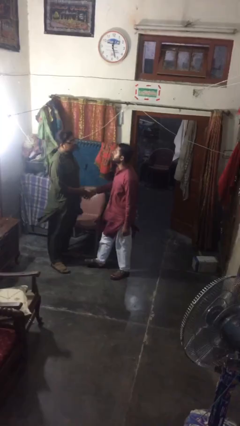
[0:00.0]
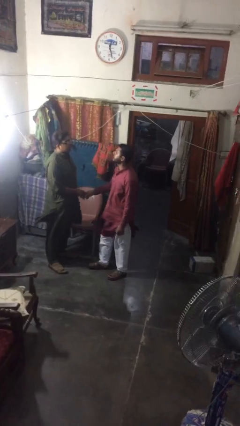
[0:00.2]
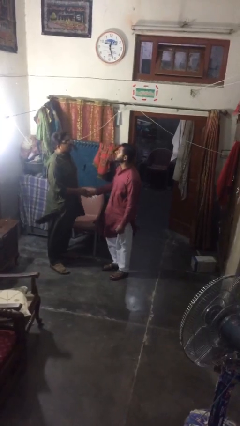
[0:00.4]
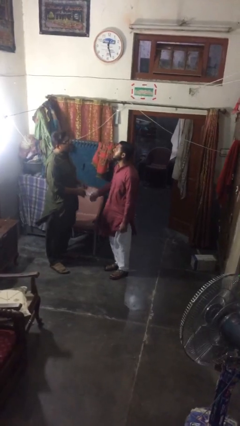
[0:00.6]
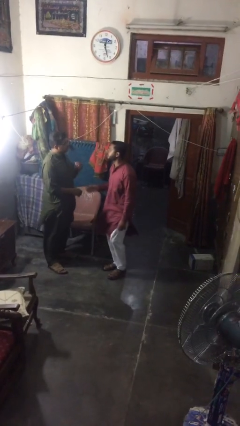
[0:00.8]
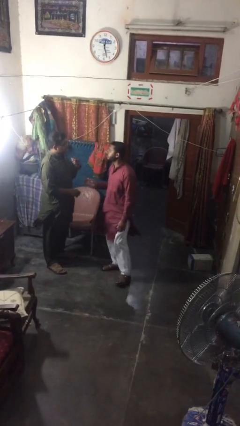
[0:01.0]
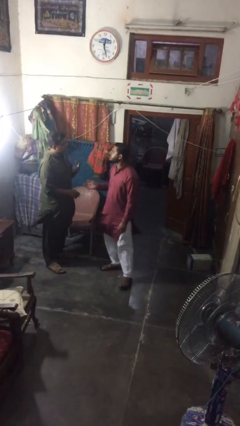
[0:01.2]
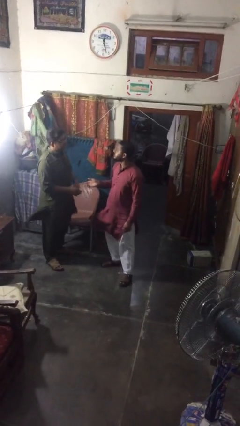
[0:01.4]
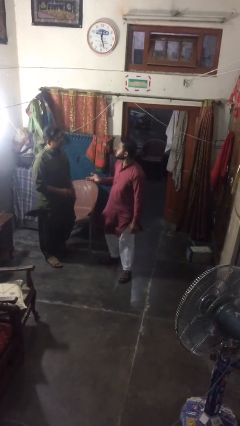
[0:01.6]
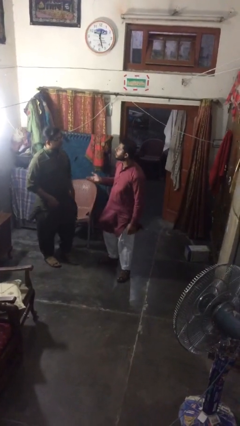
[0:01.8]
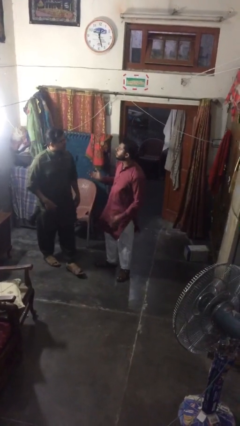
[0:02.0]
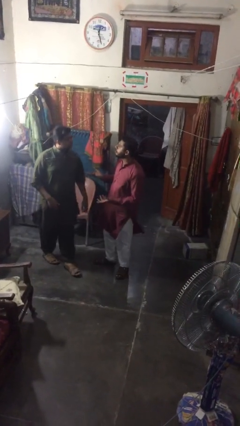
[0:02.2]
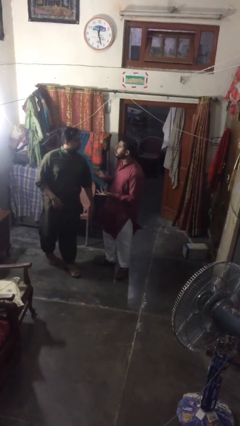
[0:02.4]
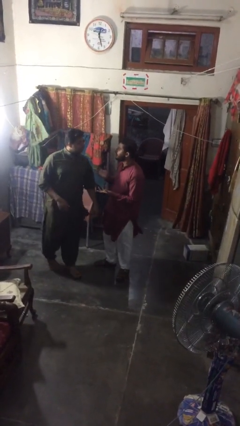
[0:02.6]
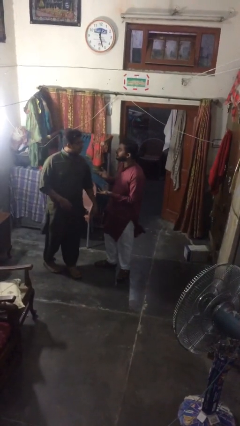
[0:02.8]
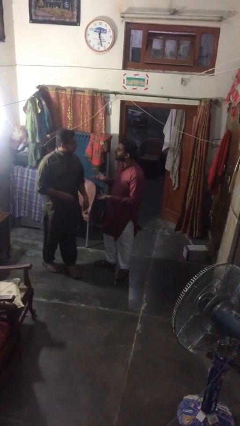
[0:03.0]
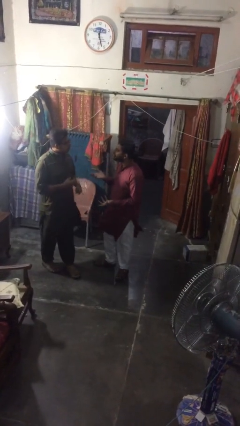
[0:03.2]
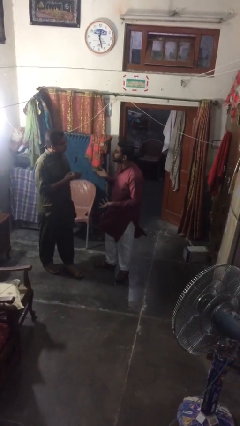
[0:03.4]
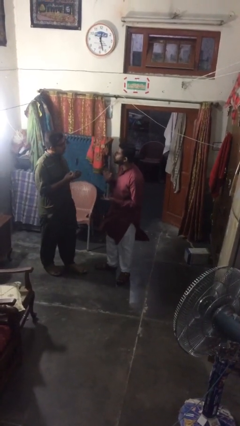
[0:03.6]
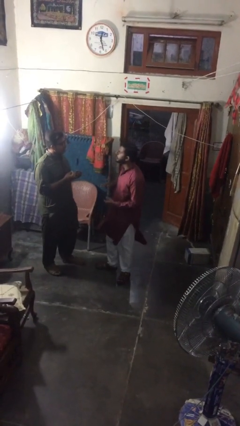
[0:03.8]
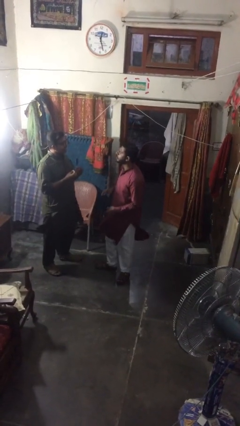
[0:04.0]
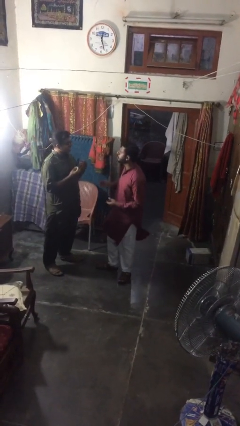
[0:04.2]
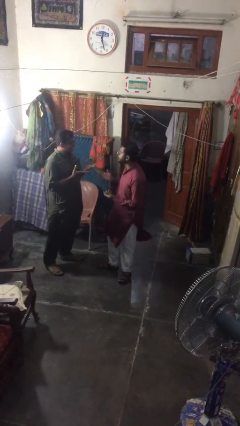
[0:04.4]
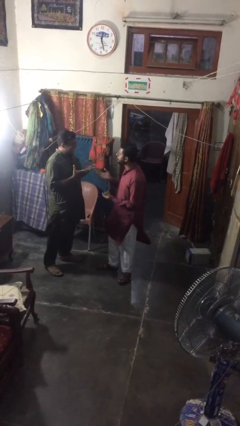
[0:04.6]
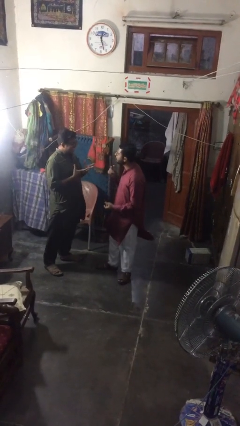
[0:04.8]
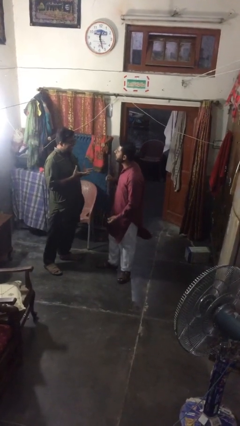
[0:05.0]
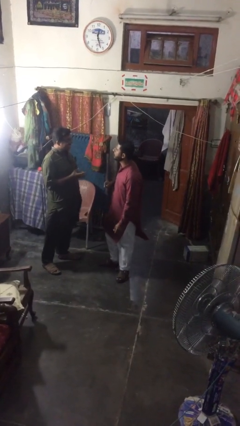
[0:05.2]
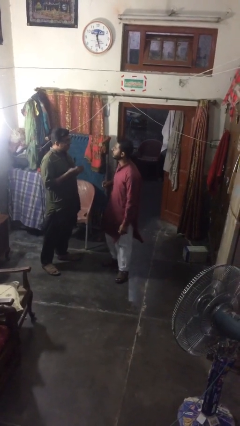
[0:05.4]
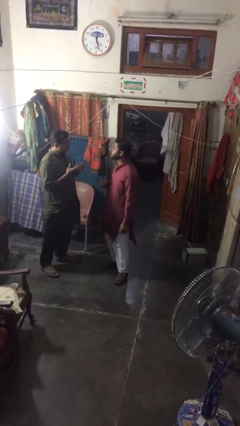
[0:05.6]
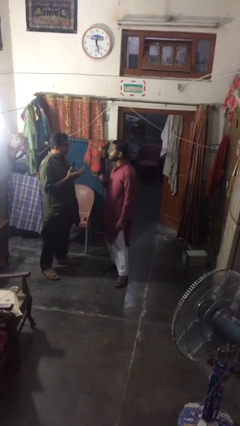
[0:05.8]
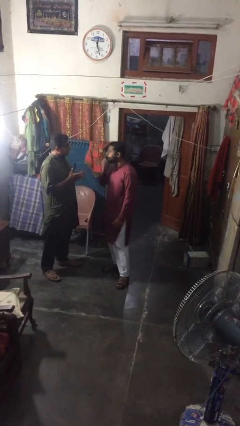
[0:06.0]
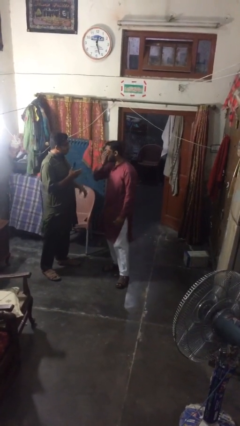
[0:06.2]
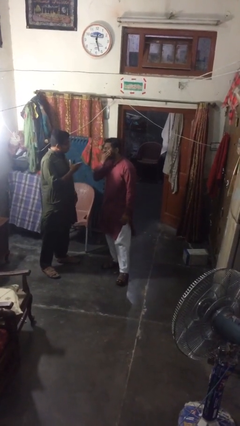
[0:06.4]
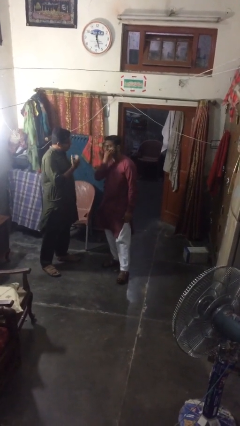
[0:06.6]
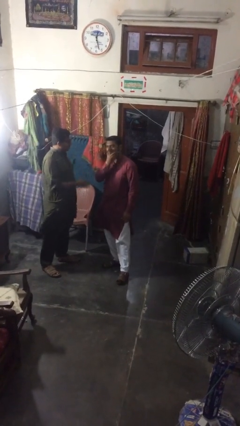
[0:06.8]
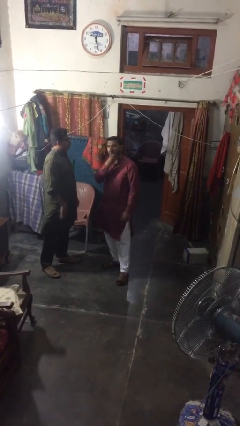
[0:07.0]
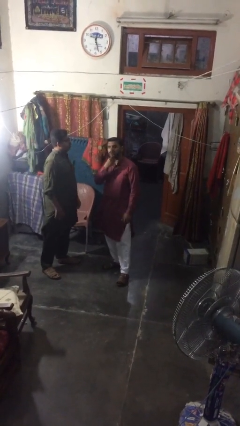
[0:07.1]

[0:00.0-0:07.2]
person talks to person

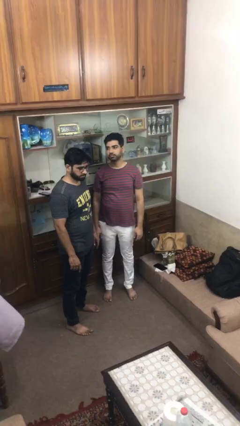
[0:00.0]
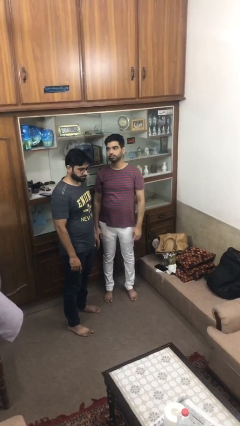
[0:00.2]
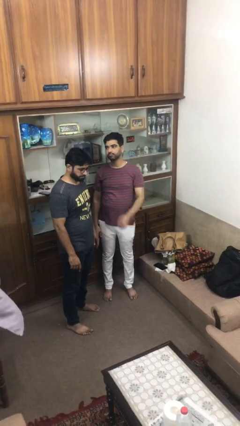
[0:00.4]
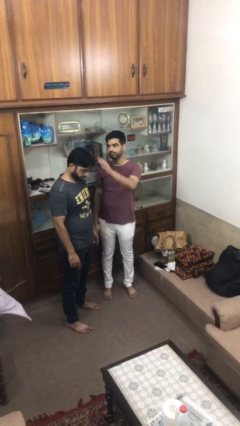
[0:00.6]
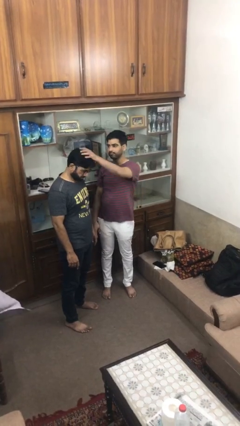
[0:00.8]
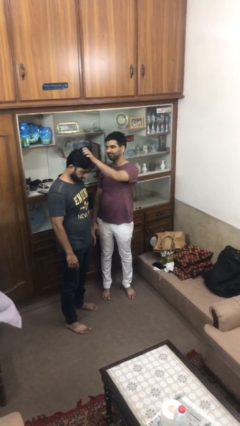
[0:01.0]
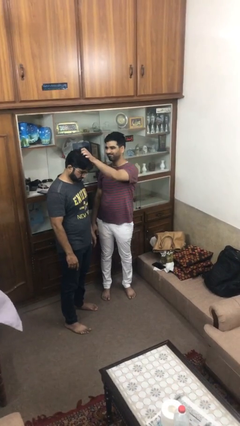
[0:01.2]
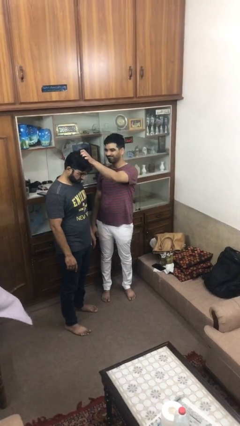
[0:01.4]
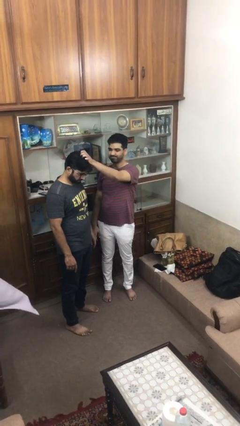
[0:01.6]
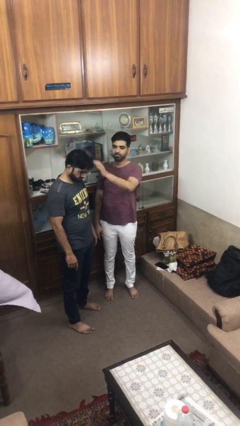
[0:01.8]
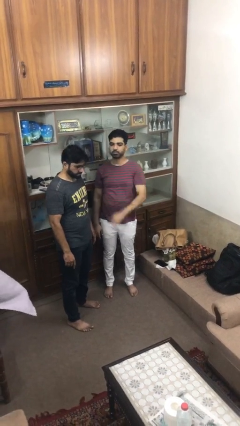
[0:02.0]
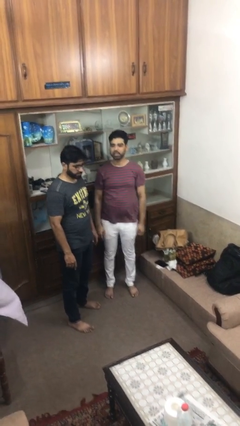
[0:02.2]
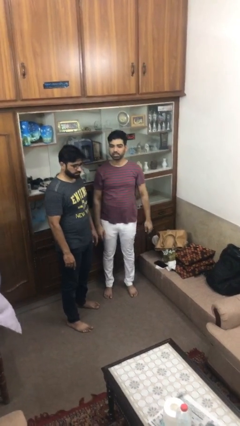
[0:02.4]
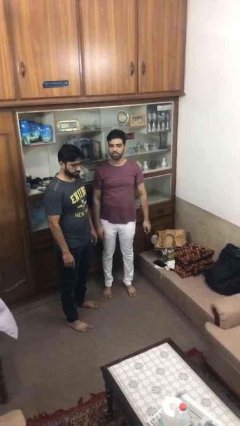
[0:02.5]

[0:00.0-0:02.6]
person grabs person by hair

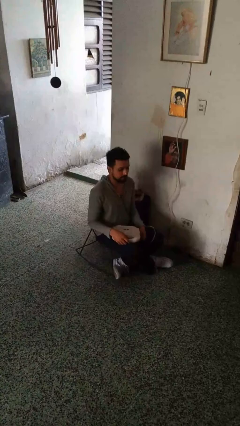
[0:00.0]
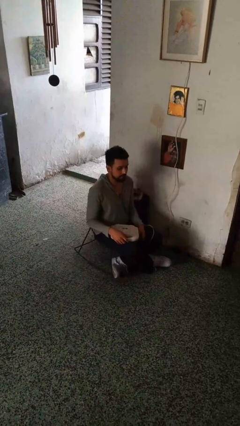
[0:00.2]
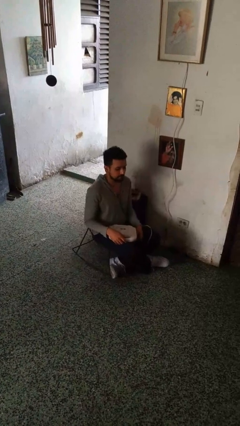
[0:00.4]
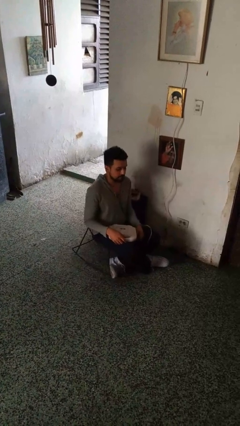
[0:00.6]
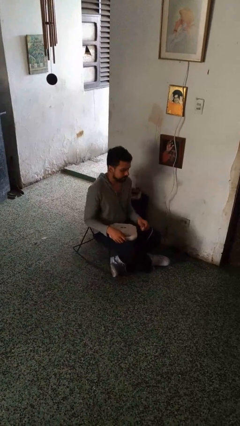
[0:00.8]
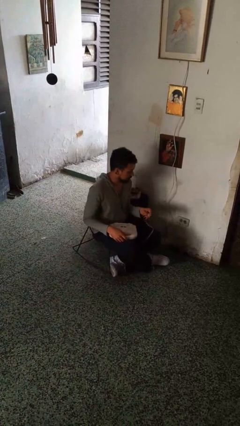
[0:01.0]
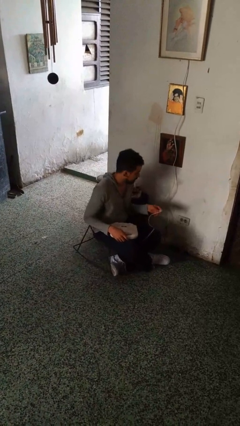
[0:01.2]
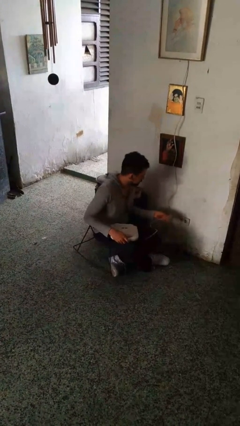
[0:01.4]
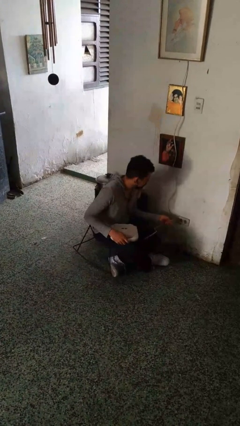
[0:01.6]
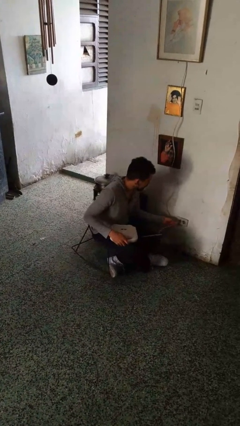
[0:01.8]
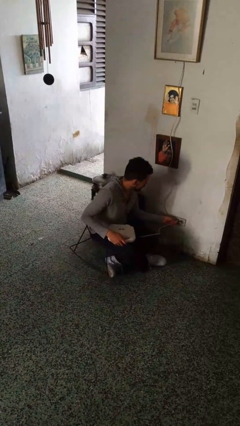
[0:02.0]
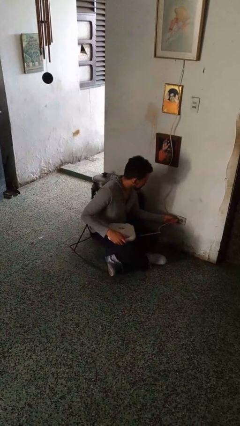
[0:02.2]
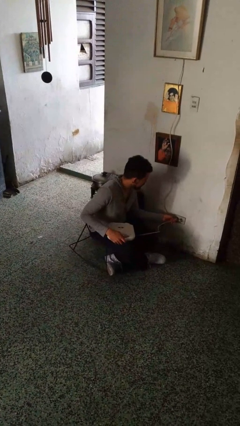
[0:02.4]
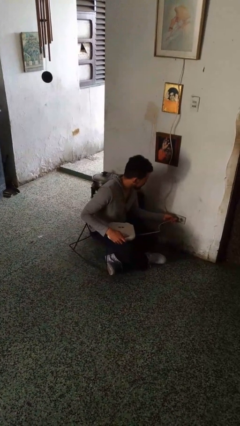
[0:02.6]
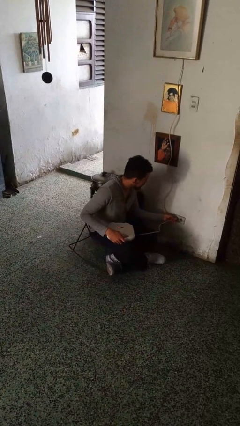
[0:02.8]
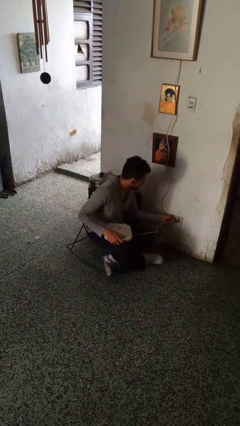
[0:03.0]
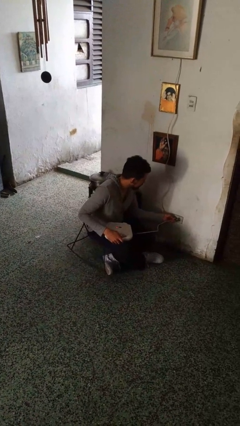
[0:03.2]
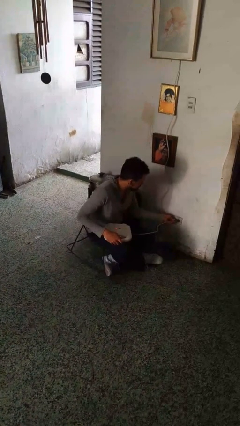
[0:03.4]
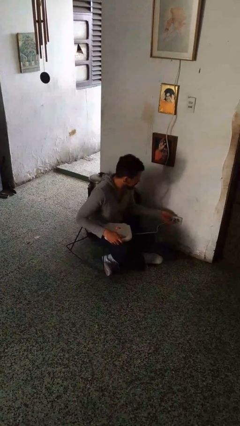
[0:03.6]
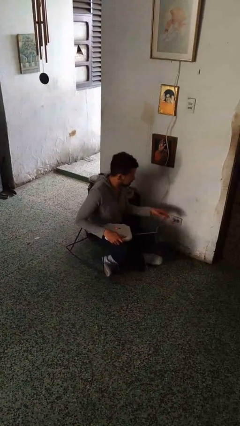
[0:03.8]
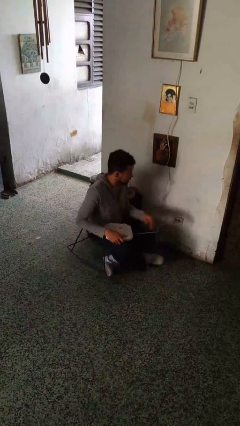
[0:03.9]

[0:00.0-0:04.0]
person plugs into electrical socket

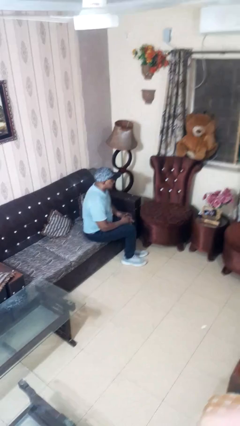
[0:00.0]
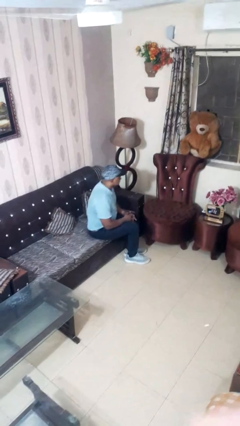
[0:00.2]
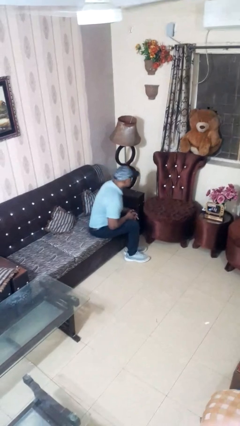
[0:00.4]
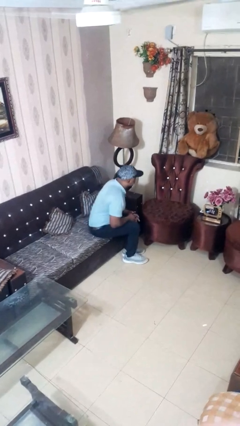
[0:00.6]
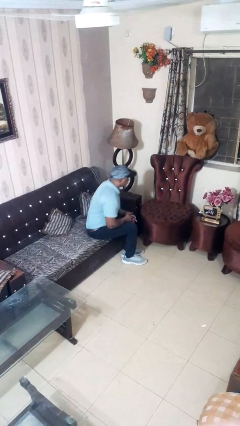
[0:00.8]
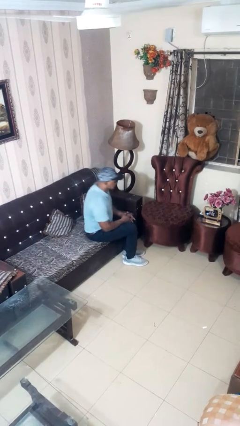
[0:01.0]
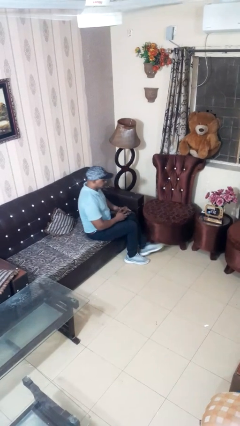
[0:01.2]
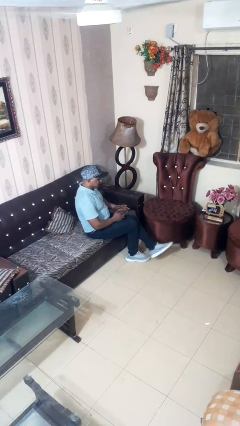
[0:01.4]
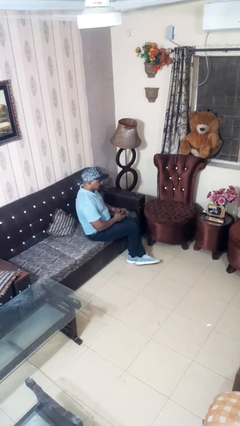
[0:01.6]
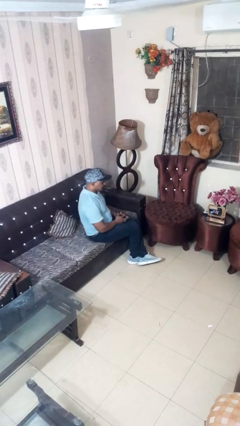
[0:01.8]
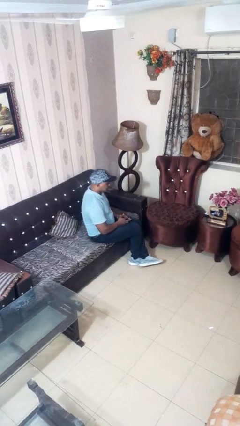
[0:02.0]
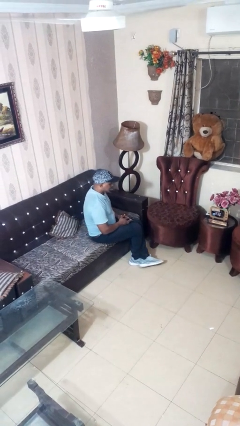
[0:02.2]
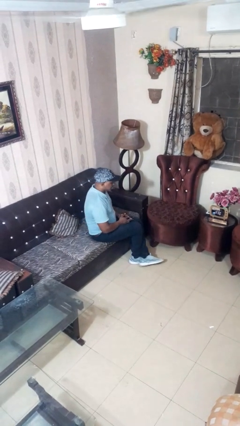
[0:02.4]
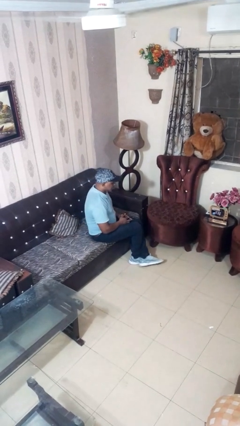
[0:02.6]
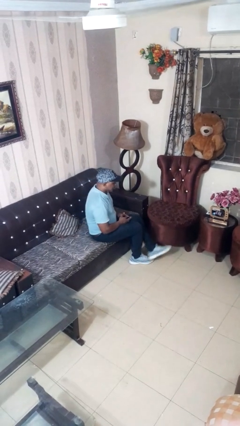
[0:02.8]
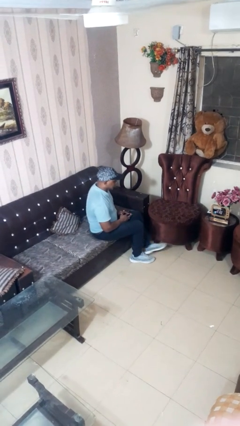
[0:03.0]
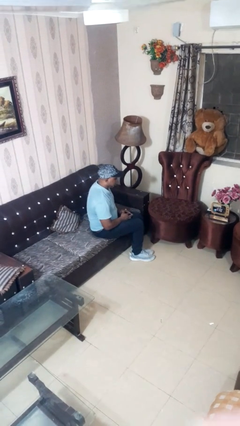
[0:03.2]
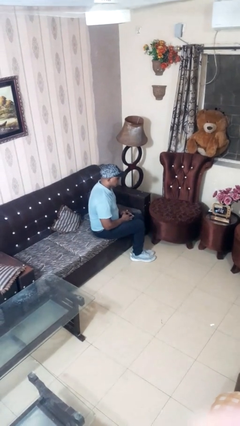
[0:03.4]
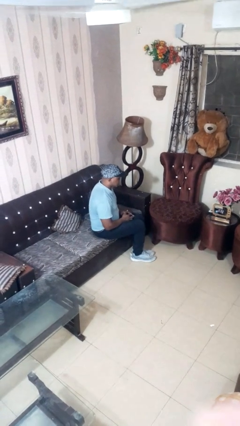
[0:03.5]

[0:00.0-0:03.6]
person crosses legs

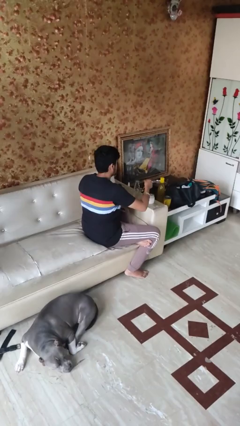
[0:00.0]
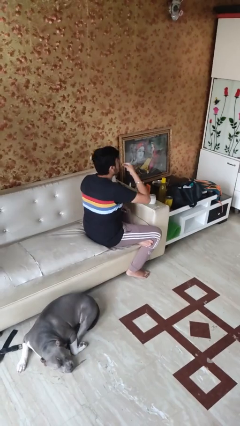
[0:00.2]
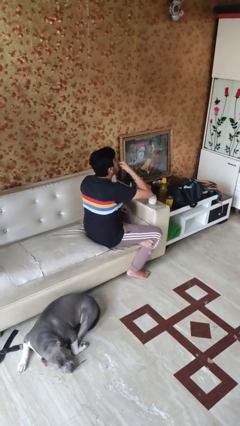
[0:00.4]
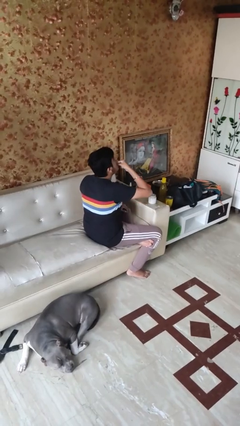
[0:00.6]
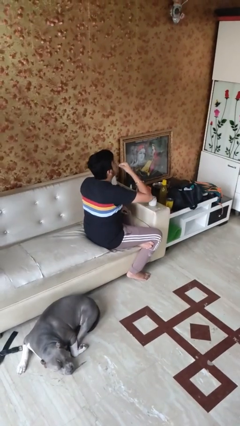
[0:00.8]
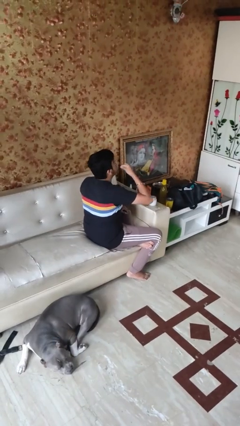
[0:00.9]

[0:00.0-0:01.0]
person takes medicine pills
